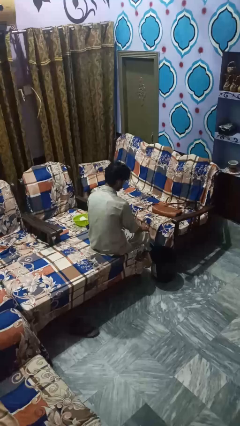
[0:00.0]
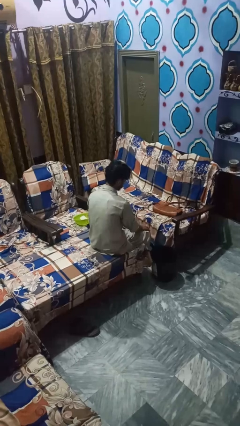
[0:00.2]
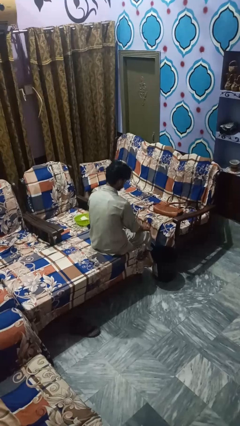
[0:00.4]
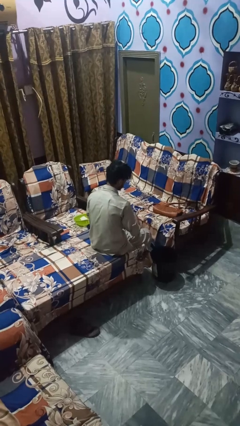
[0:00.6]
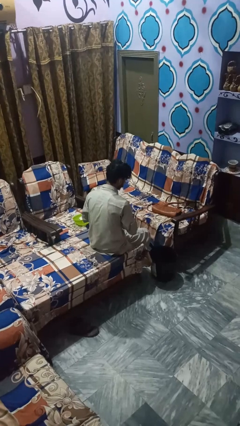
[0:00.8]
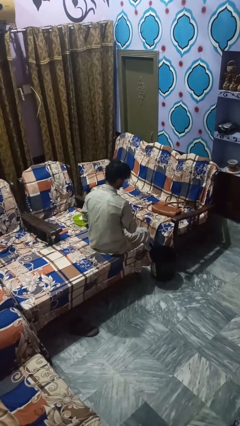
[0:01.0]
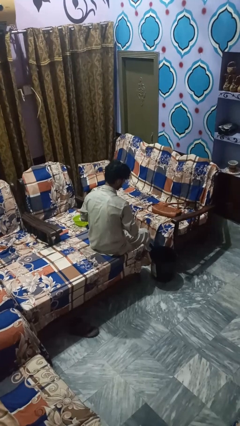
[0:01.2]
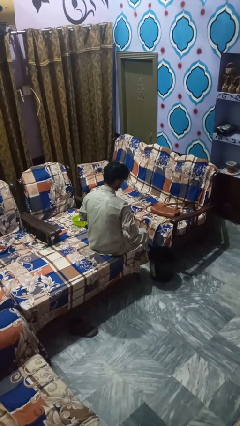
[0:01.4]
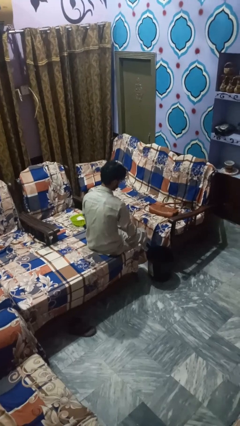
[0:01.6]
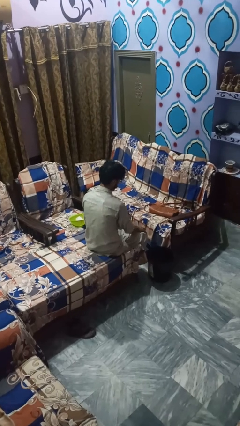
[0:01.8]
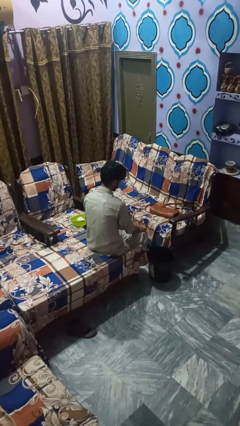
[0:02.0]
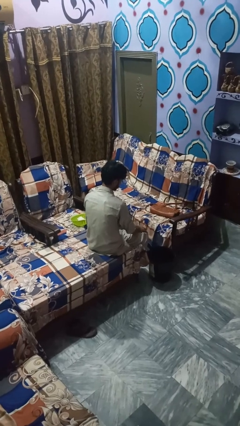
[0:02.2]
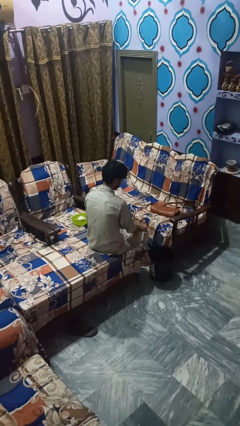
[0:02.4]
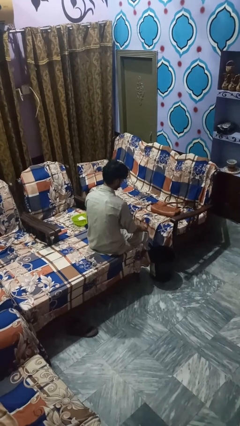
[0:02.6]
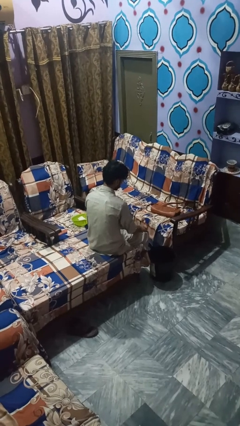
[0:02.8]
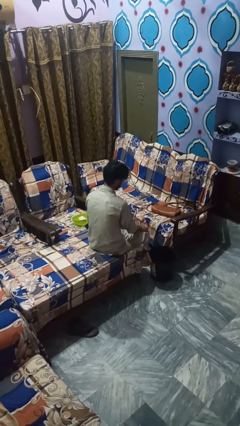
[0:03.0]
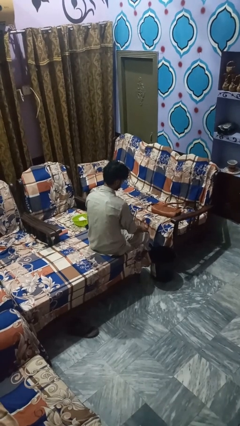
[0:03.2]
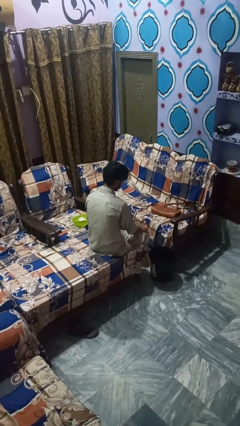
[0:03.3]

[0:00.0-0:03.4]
person unbuttons shirt

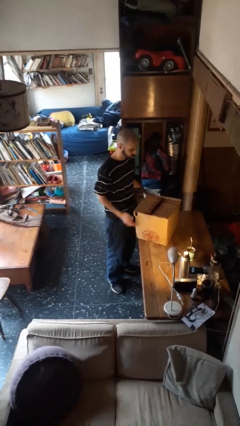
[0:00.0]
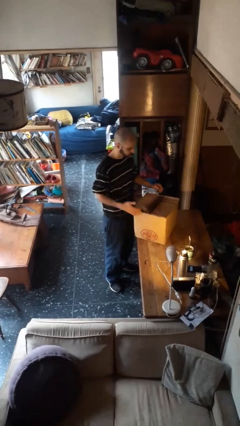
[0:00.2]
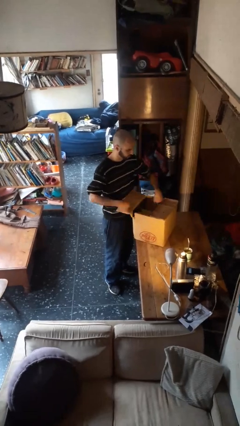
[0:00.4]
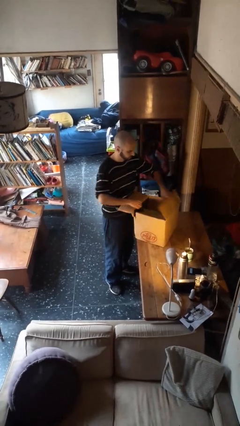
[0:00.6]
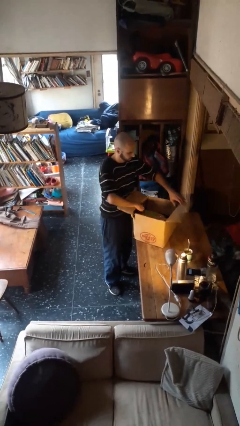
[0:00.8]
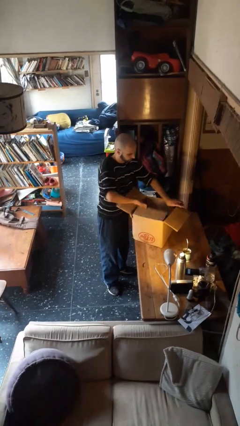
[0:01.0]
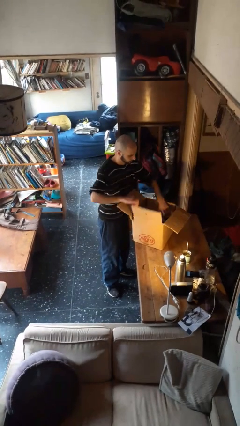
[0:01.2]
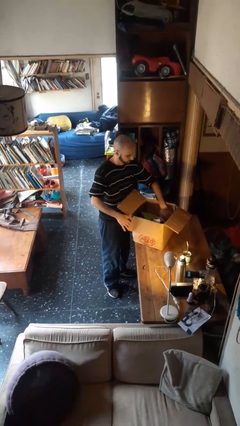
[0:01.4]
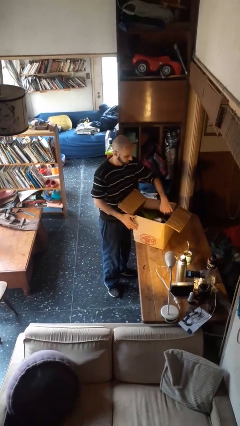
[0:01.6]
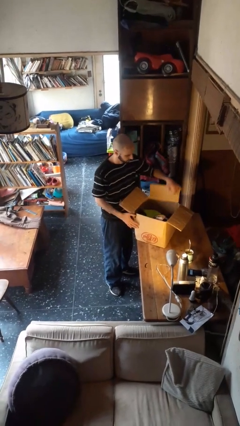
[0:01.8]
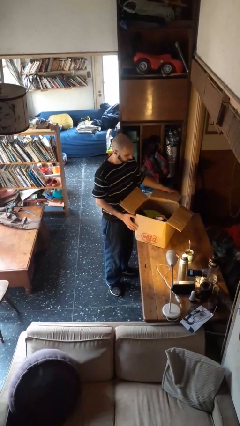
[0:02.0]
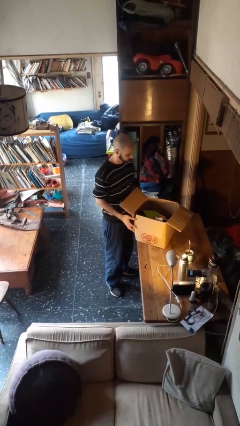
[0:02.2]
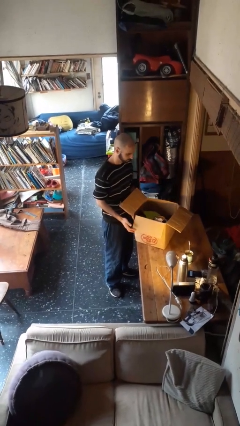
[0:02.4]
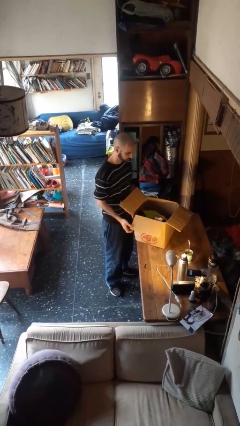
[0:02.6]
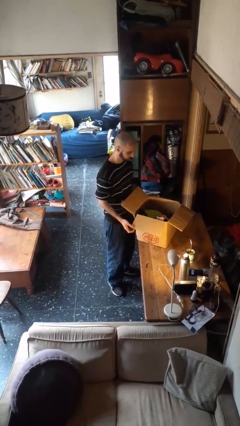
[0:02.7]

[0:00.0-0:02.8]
person opens box

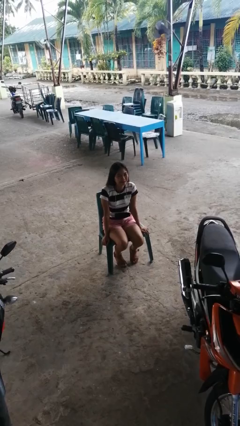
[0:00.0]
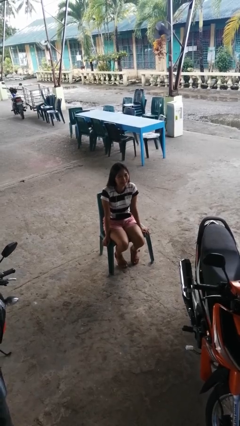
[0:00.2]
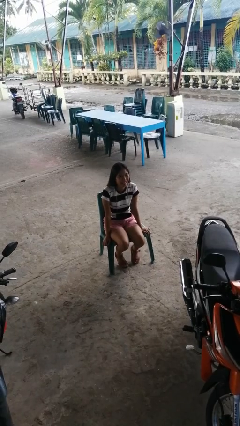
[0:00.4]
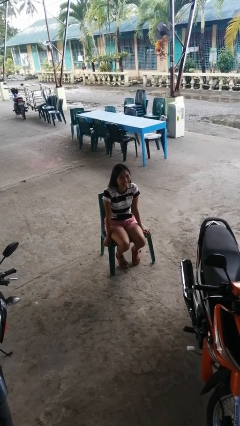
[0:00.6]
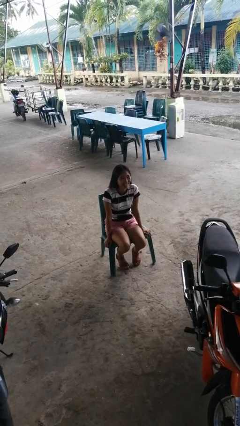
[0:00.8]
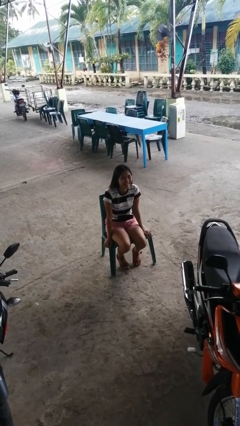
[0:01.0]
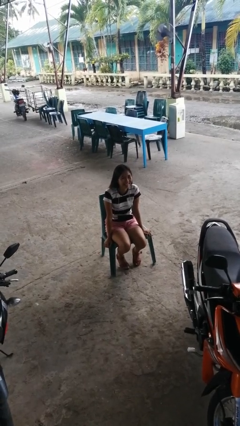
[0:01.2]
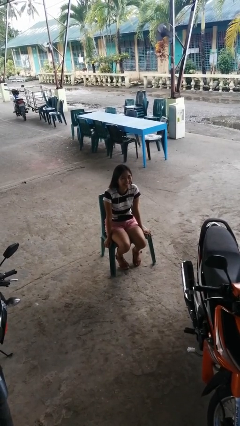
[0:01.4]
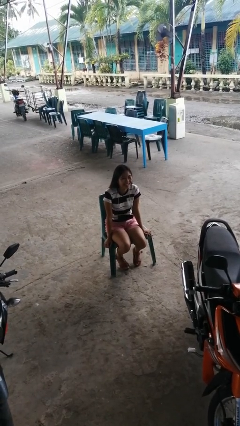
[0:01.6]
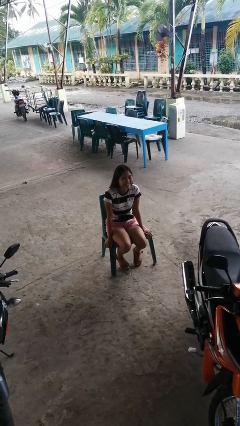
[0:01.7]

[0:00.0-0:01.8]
person sticks out tongue

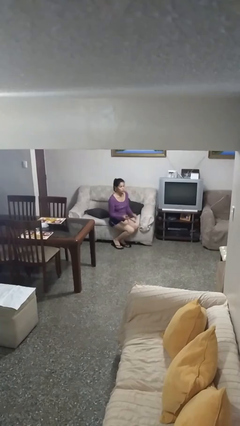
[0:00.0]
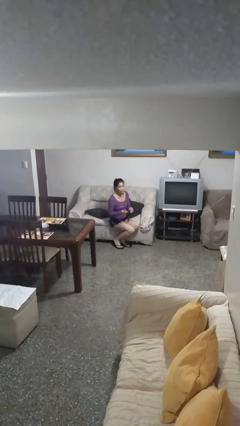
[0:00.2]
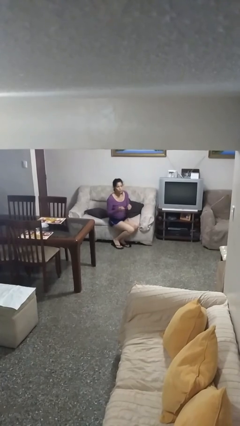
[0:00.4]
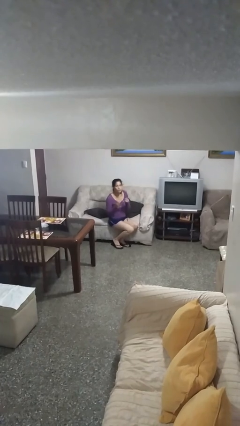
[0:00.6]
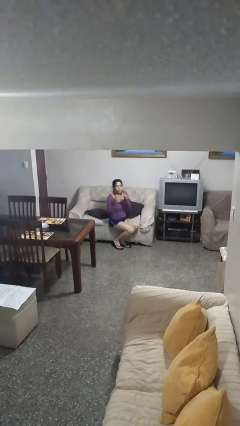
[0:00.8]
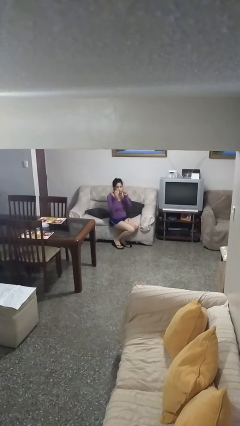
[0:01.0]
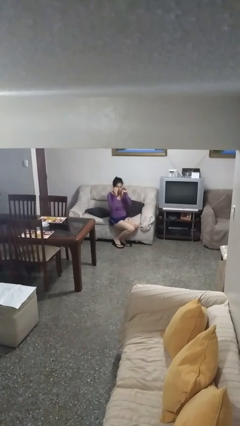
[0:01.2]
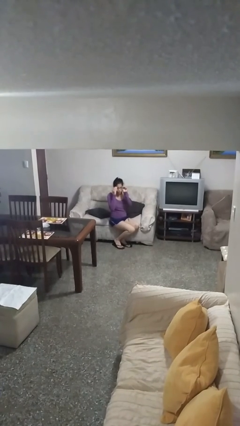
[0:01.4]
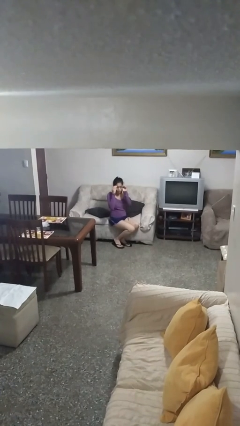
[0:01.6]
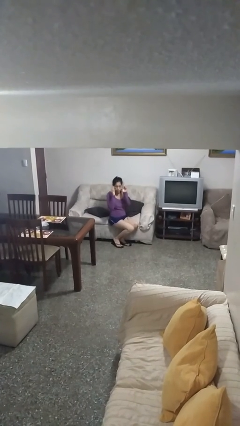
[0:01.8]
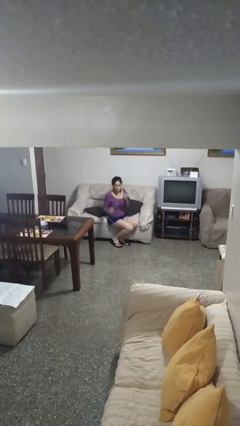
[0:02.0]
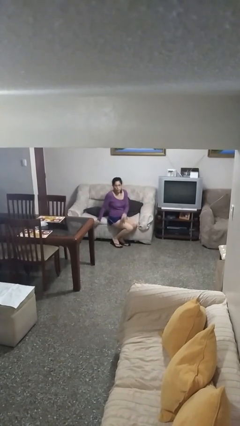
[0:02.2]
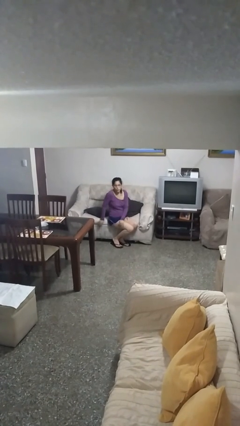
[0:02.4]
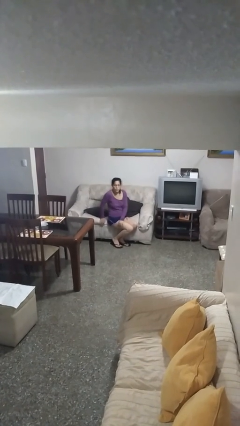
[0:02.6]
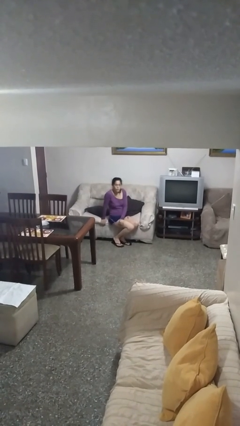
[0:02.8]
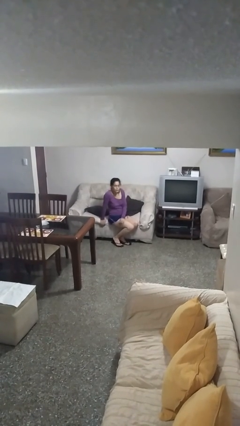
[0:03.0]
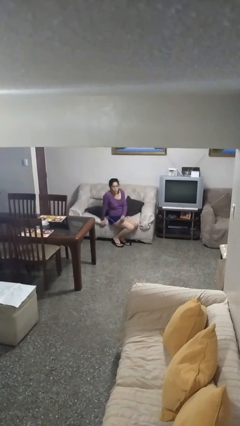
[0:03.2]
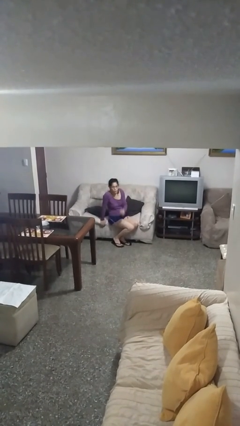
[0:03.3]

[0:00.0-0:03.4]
person puts on glasses

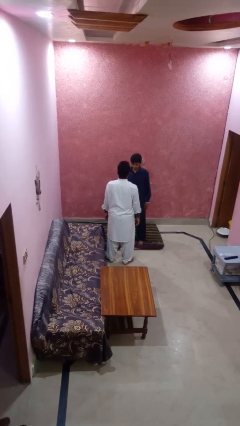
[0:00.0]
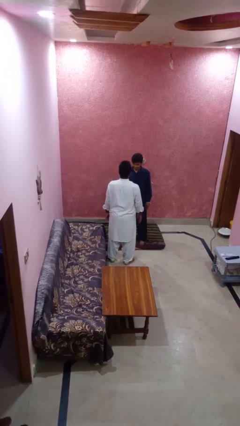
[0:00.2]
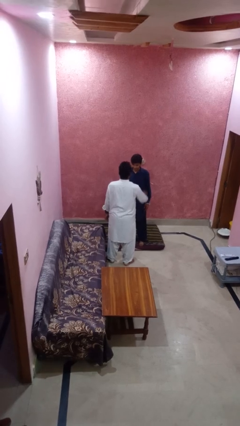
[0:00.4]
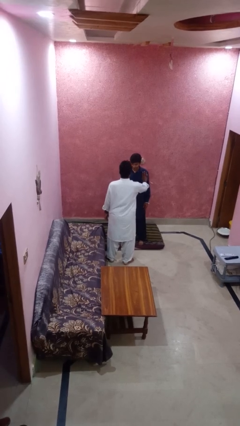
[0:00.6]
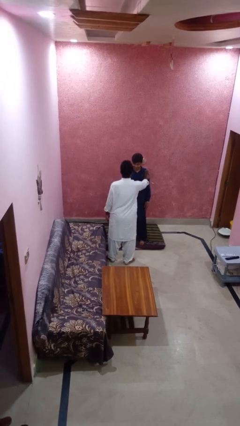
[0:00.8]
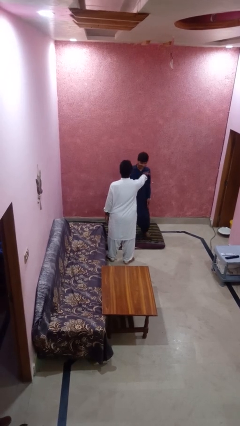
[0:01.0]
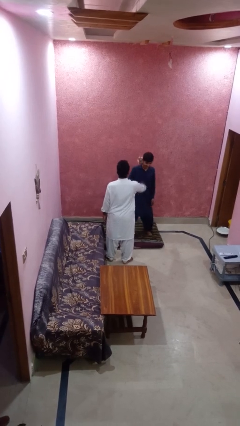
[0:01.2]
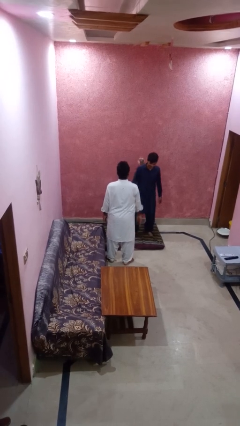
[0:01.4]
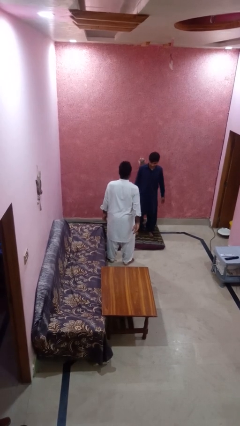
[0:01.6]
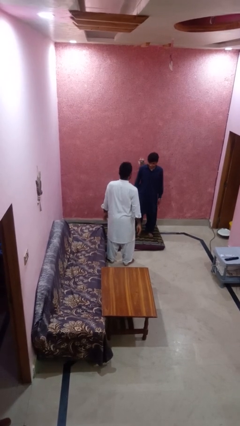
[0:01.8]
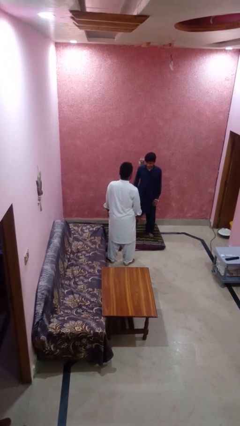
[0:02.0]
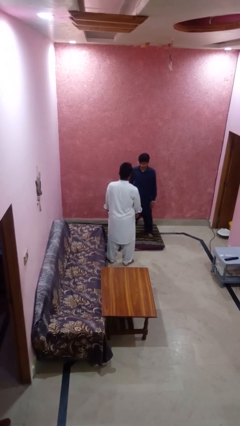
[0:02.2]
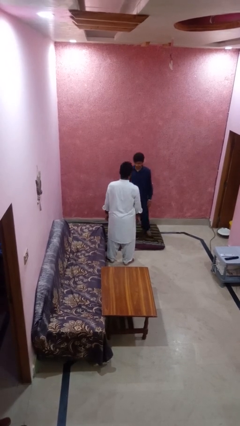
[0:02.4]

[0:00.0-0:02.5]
person shoves person

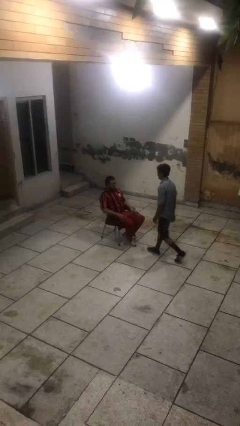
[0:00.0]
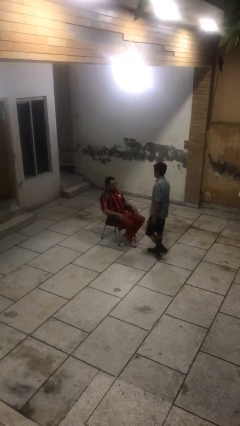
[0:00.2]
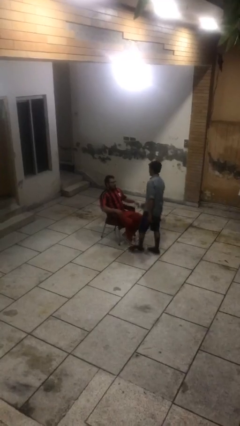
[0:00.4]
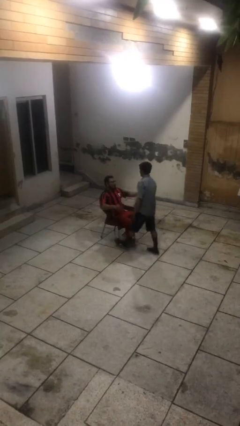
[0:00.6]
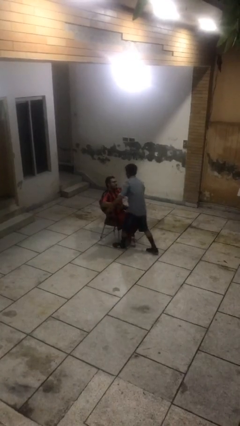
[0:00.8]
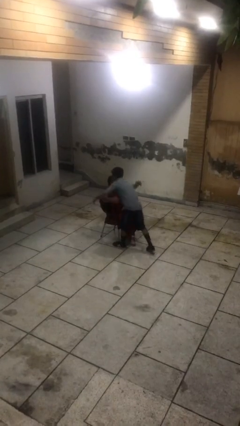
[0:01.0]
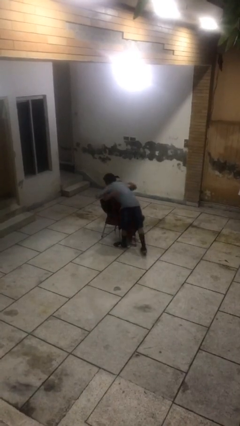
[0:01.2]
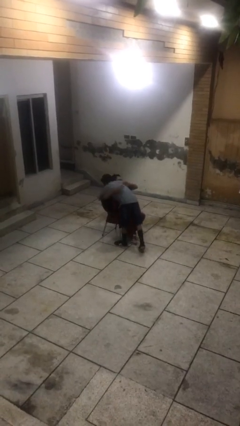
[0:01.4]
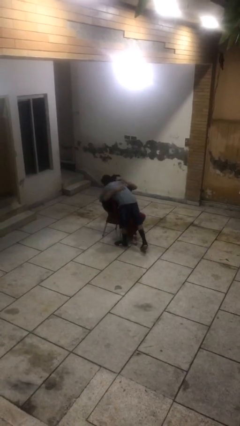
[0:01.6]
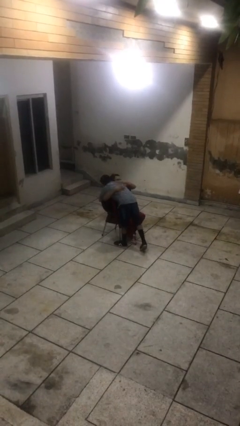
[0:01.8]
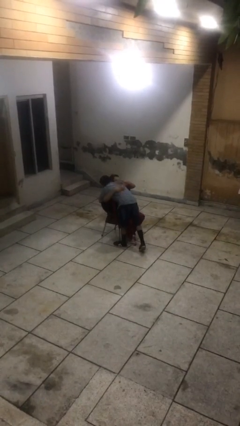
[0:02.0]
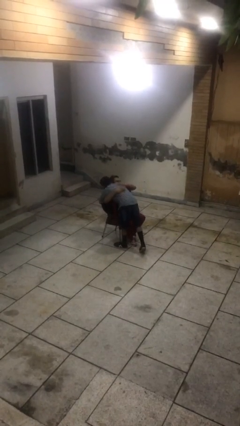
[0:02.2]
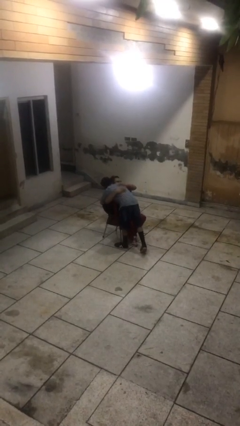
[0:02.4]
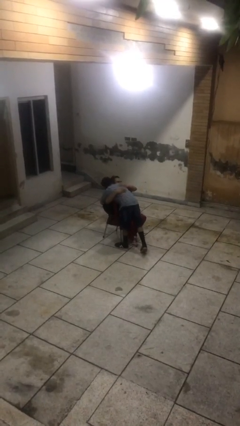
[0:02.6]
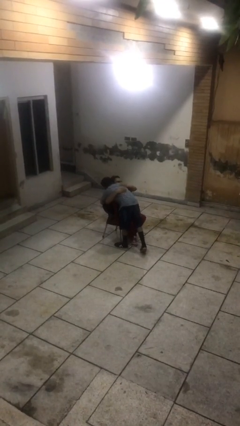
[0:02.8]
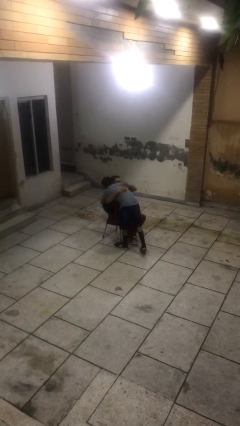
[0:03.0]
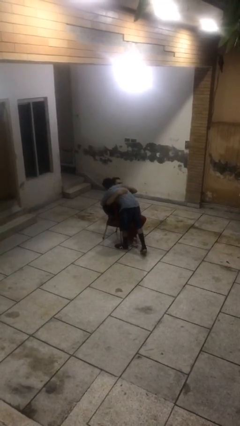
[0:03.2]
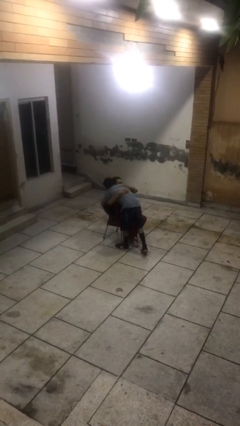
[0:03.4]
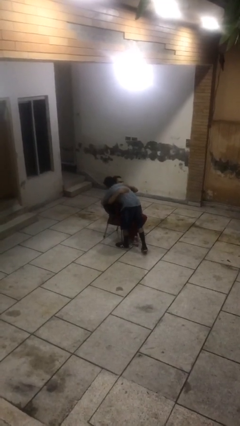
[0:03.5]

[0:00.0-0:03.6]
person embraces person

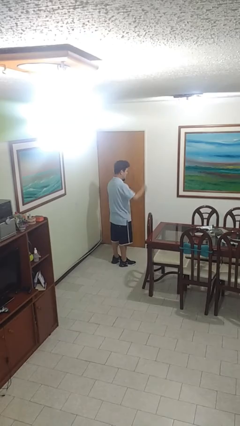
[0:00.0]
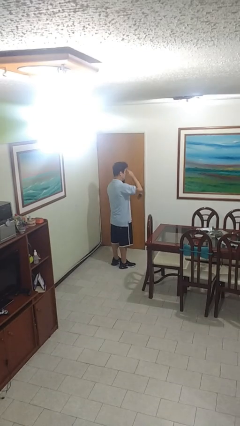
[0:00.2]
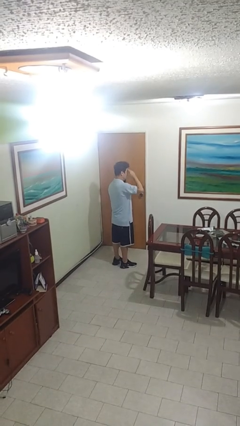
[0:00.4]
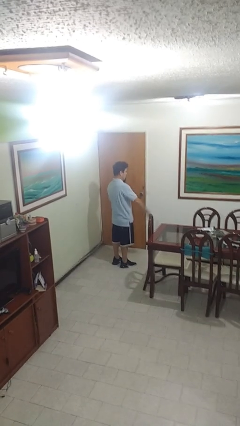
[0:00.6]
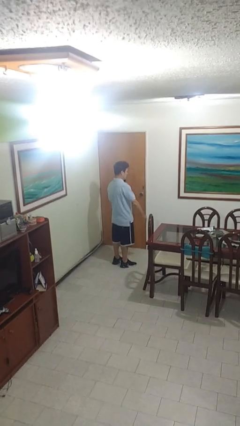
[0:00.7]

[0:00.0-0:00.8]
person salutes
